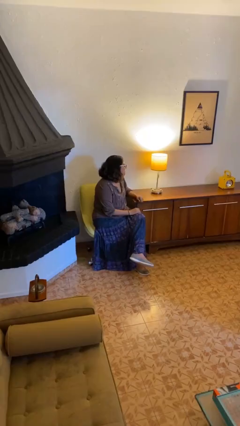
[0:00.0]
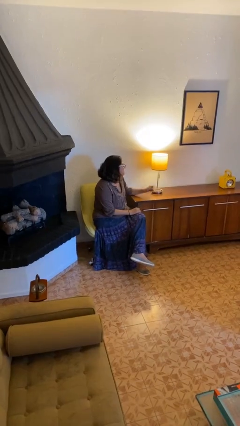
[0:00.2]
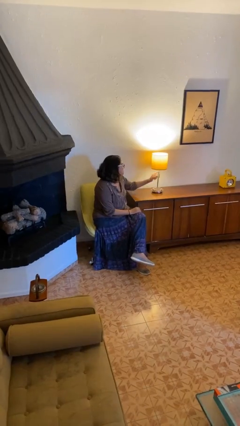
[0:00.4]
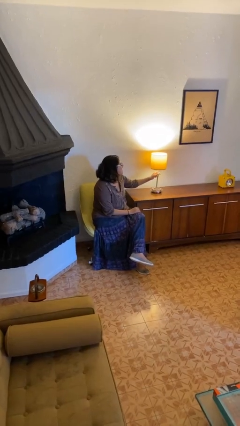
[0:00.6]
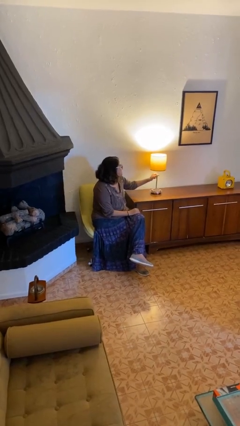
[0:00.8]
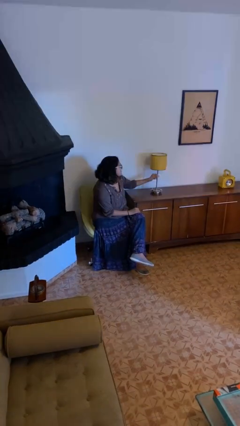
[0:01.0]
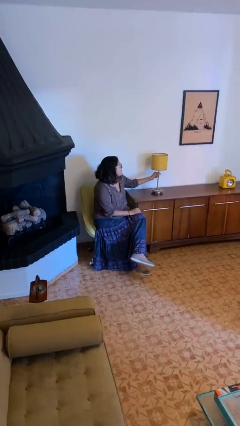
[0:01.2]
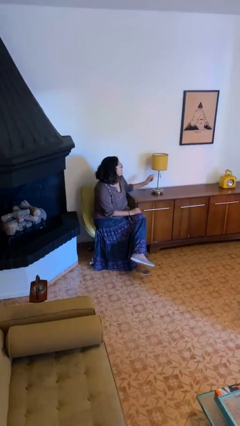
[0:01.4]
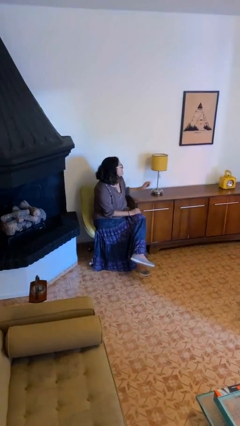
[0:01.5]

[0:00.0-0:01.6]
person turns off lamp

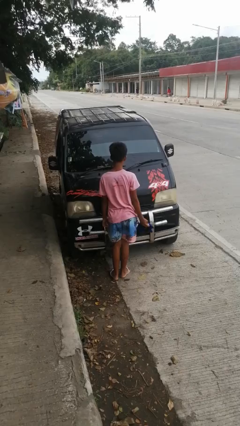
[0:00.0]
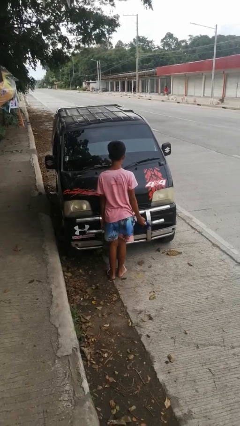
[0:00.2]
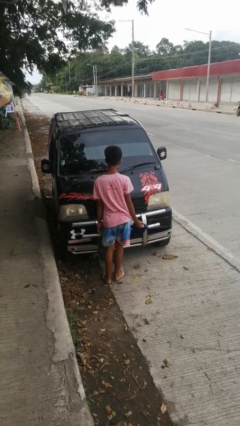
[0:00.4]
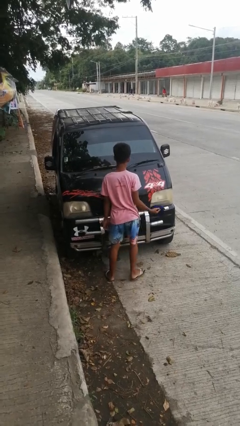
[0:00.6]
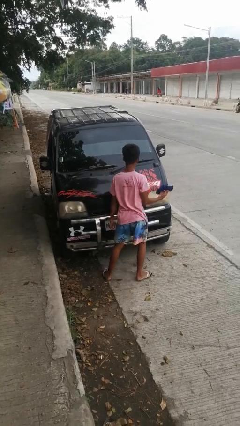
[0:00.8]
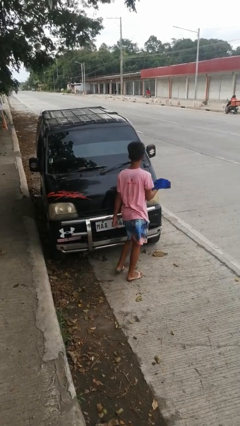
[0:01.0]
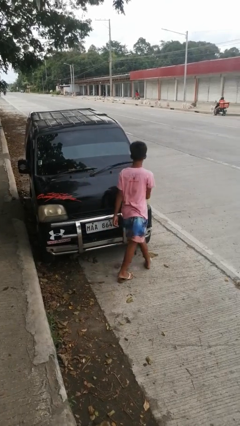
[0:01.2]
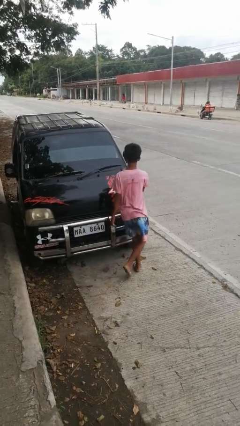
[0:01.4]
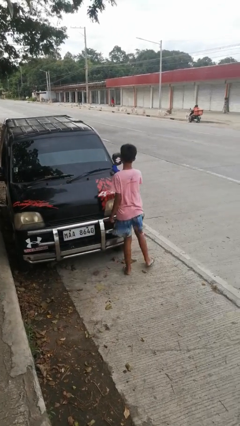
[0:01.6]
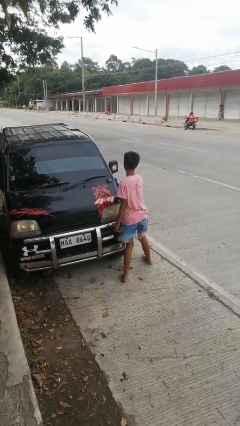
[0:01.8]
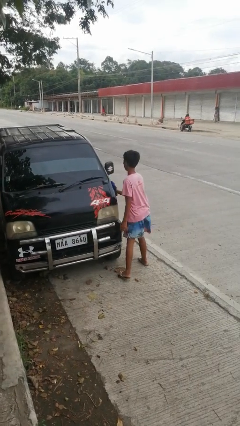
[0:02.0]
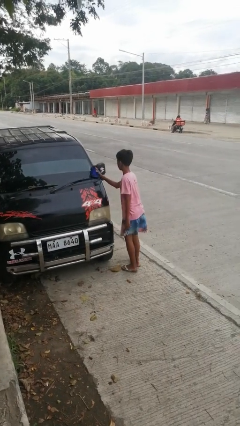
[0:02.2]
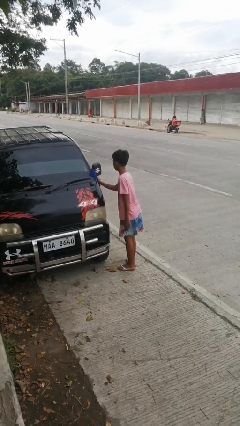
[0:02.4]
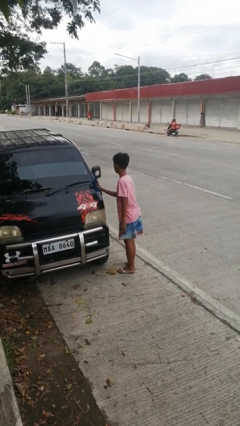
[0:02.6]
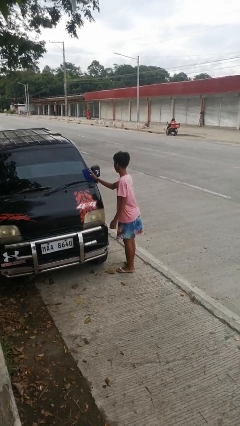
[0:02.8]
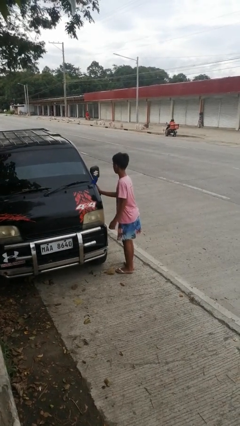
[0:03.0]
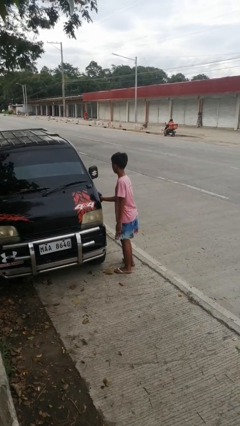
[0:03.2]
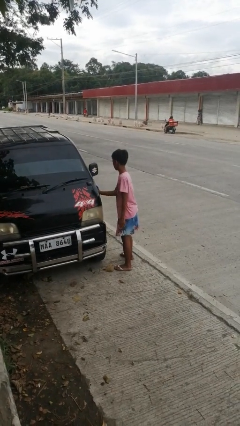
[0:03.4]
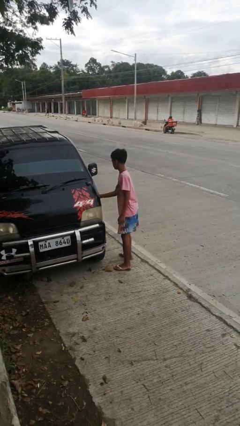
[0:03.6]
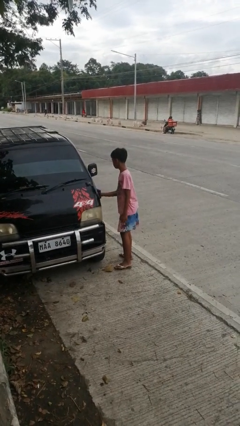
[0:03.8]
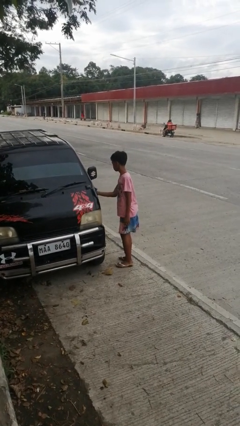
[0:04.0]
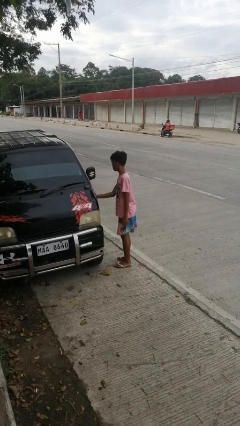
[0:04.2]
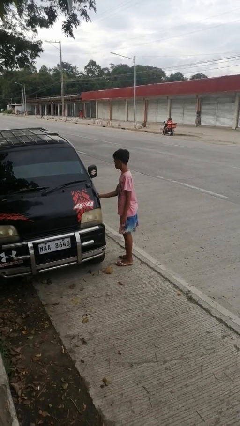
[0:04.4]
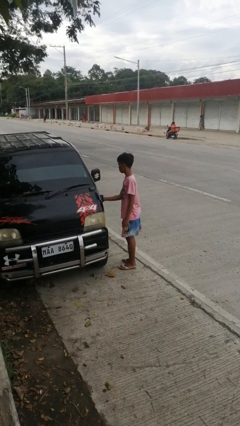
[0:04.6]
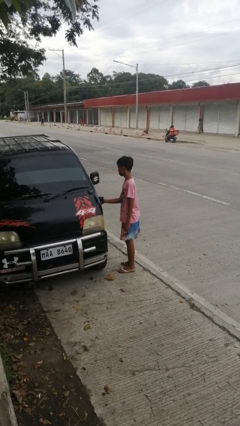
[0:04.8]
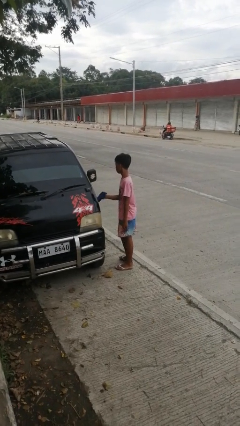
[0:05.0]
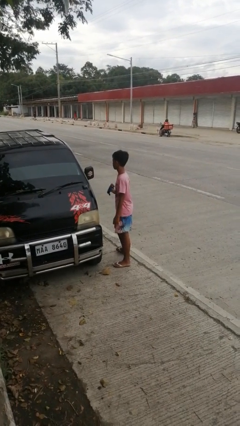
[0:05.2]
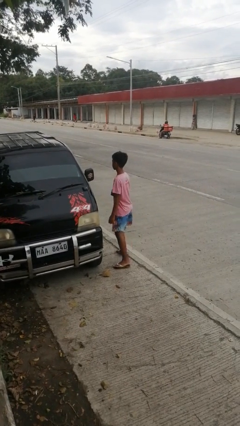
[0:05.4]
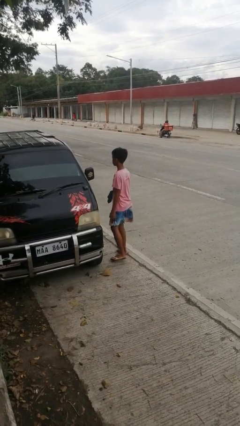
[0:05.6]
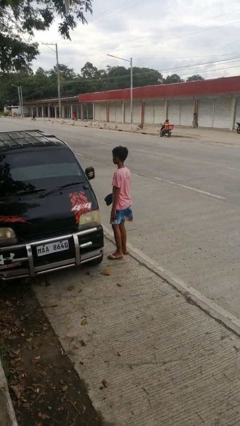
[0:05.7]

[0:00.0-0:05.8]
person polishes car with rag

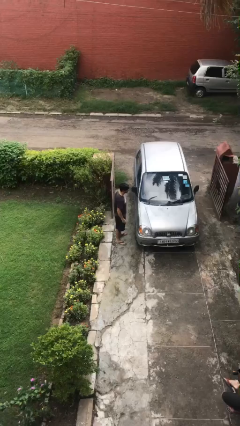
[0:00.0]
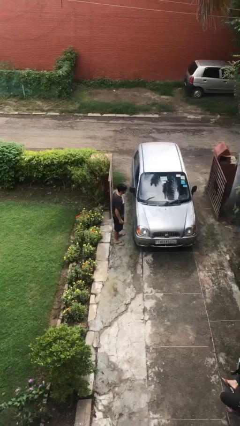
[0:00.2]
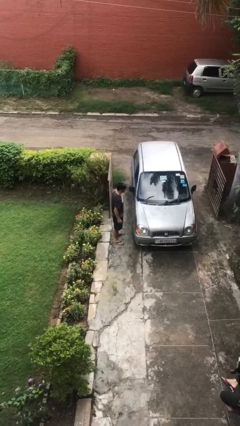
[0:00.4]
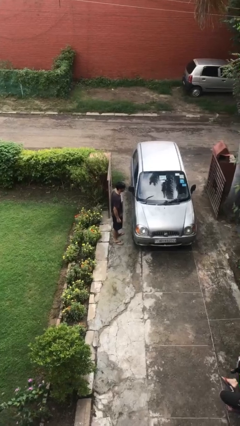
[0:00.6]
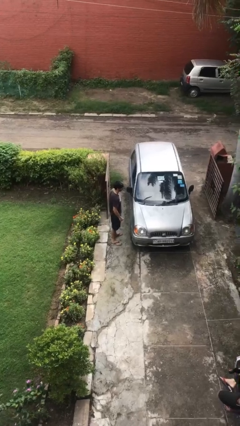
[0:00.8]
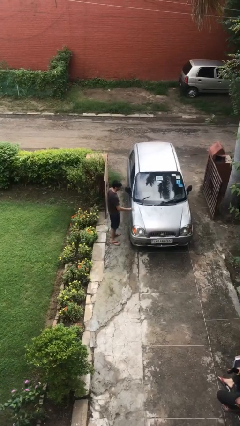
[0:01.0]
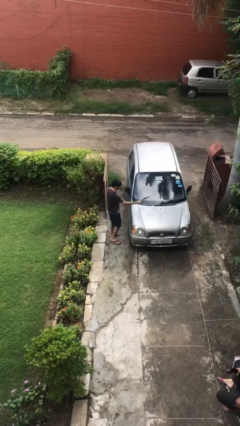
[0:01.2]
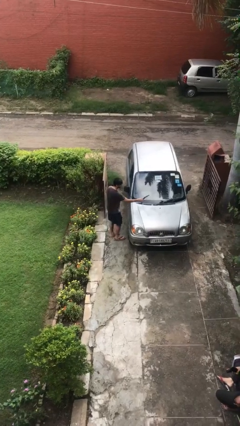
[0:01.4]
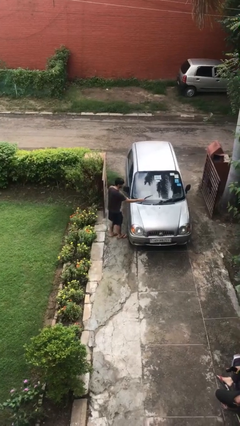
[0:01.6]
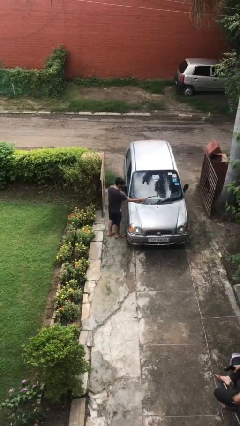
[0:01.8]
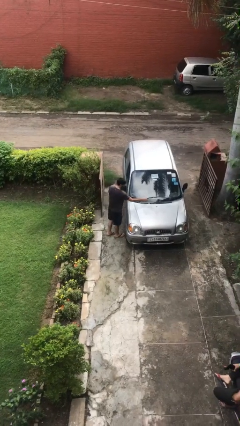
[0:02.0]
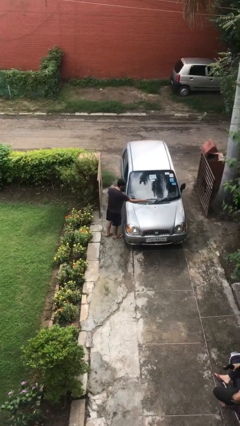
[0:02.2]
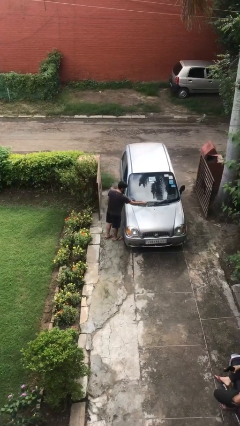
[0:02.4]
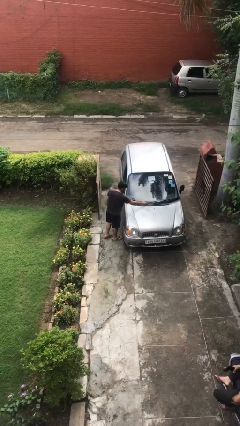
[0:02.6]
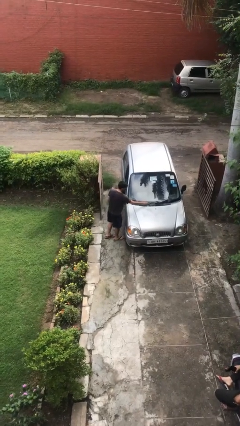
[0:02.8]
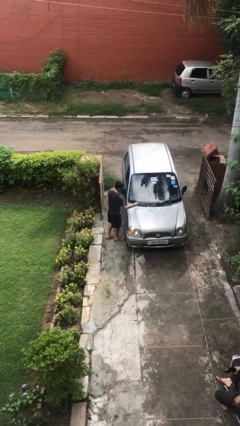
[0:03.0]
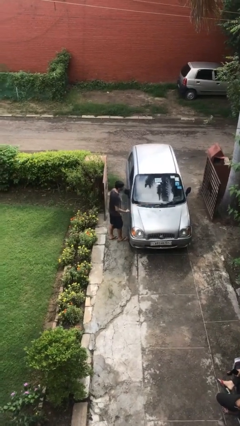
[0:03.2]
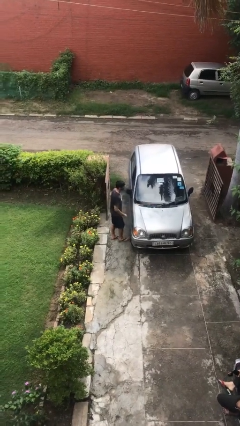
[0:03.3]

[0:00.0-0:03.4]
person flips down car wipers

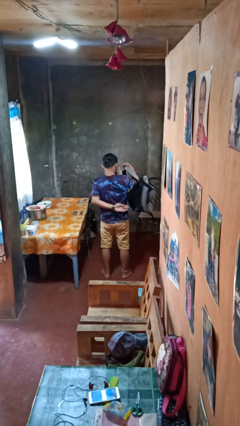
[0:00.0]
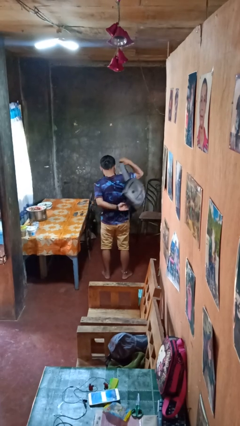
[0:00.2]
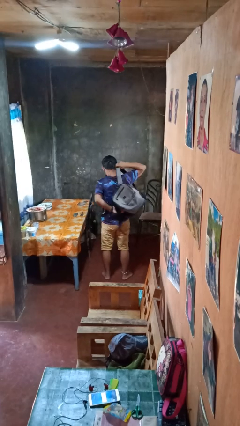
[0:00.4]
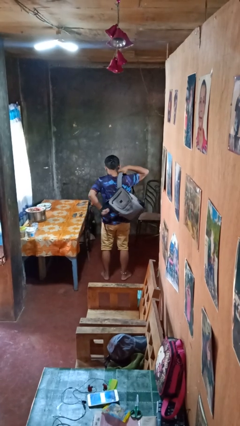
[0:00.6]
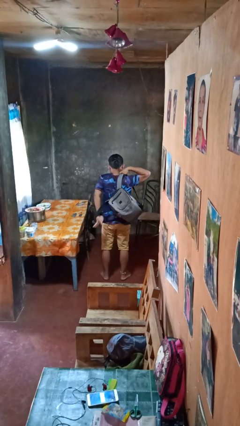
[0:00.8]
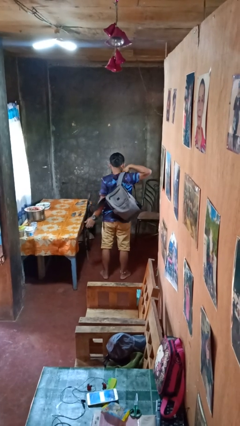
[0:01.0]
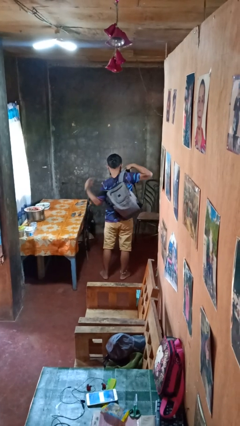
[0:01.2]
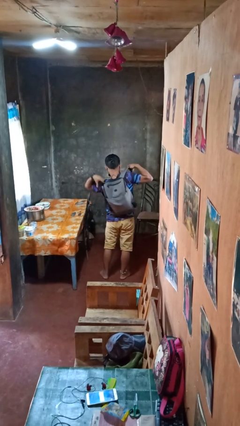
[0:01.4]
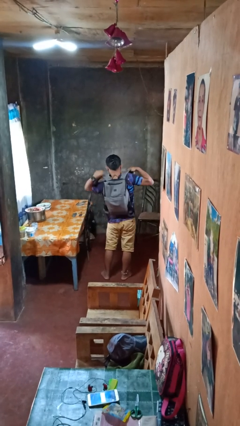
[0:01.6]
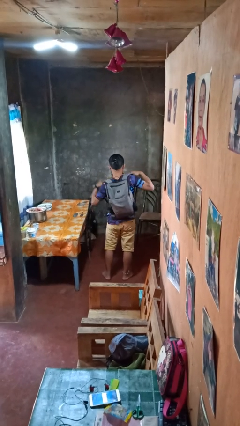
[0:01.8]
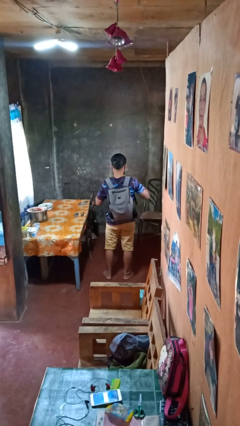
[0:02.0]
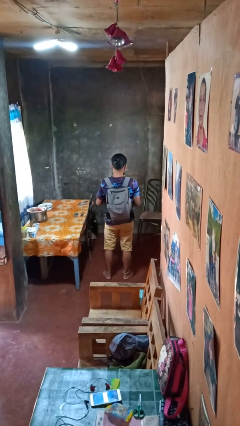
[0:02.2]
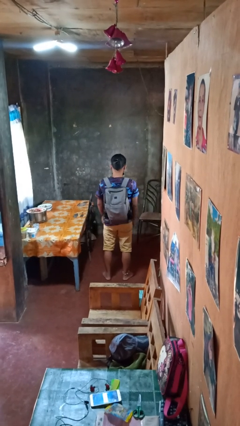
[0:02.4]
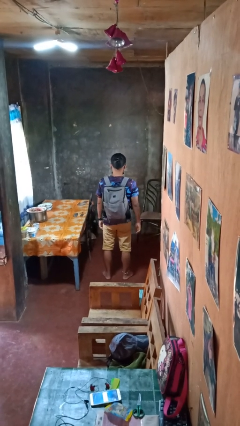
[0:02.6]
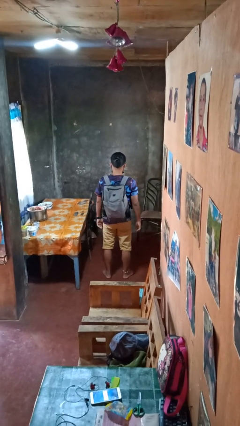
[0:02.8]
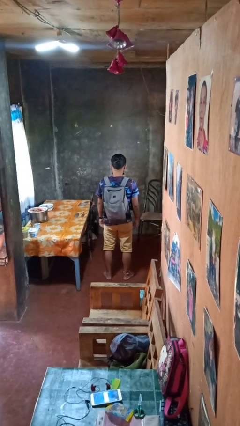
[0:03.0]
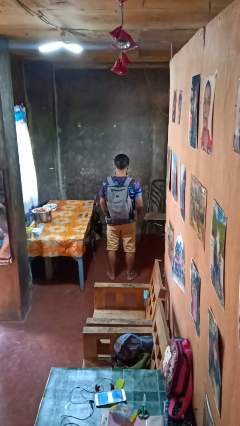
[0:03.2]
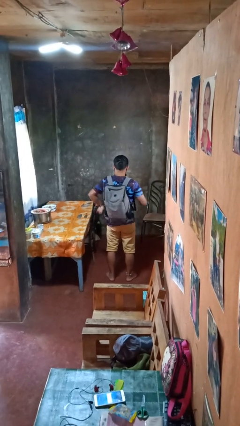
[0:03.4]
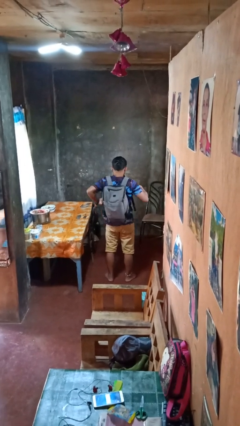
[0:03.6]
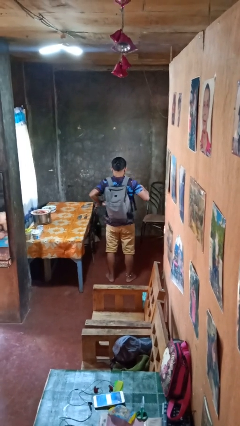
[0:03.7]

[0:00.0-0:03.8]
person puts on backpack

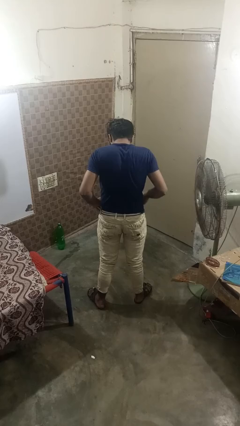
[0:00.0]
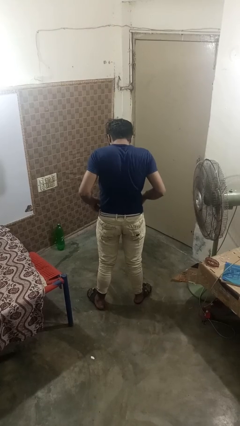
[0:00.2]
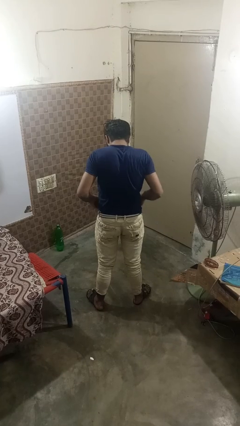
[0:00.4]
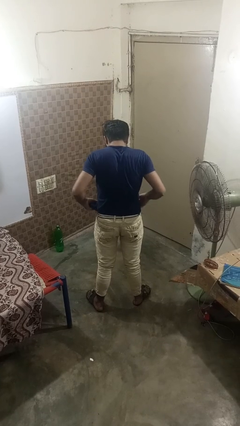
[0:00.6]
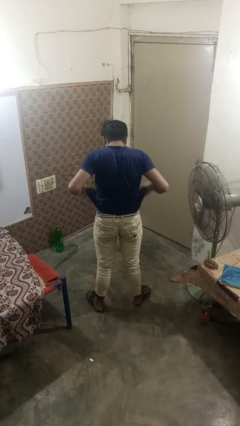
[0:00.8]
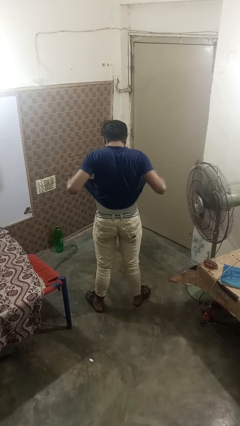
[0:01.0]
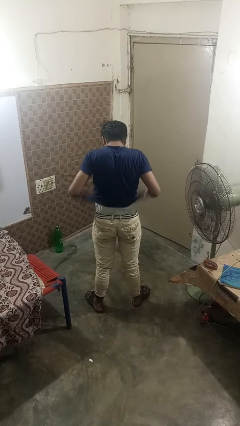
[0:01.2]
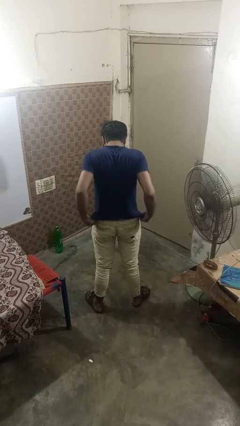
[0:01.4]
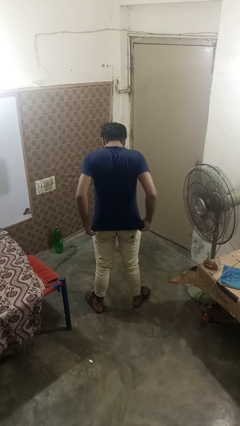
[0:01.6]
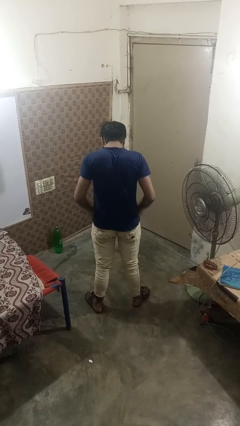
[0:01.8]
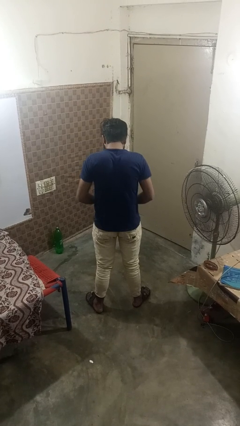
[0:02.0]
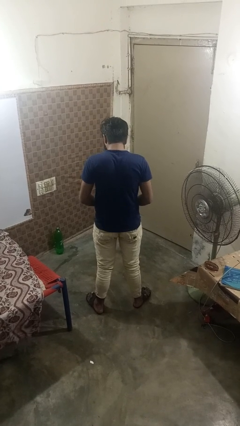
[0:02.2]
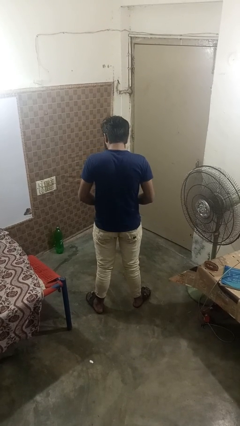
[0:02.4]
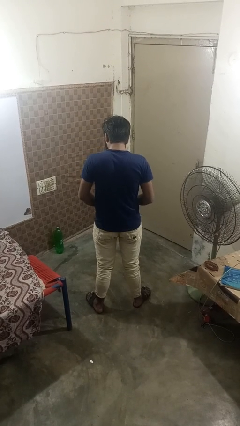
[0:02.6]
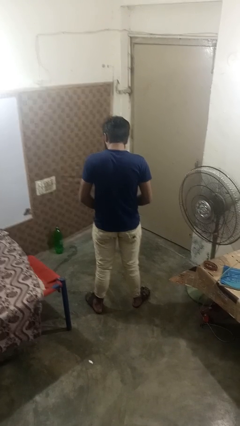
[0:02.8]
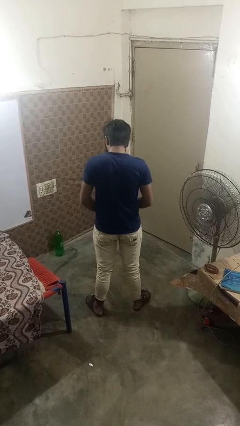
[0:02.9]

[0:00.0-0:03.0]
person untucks shirt
